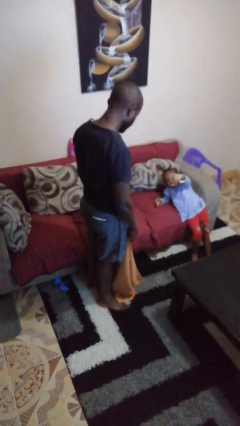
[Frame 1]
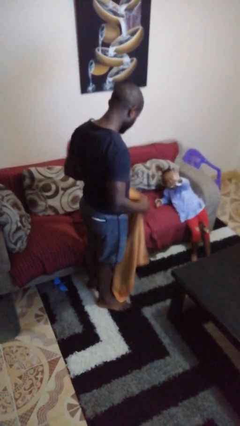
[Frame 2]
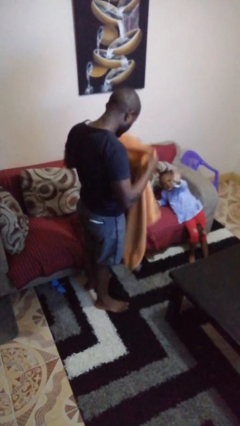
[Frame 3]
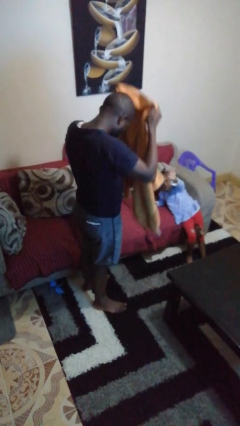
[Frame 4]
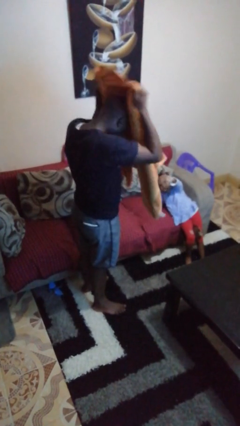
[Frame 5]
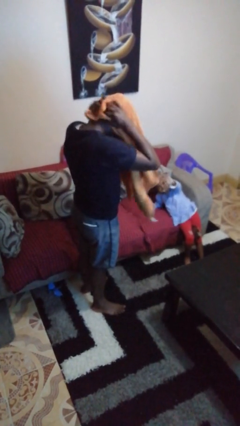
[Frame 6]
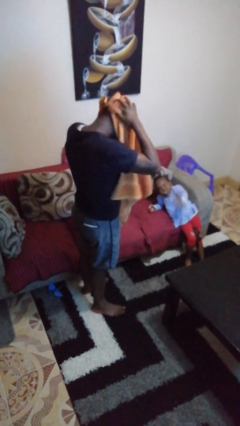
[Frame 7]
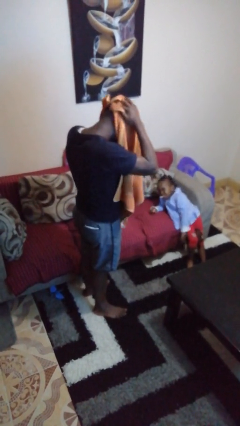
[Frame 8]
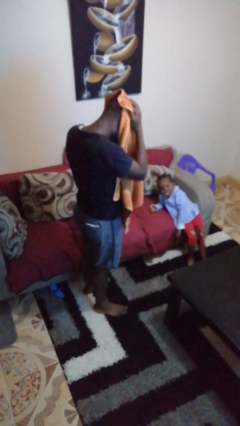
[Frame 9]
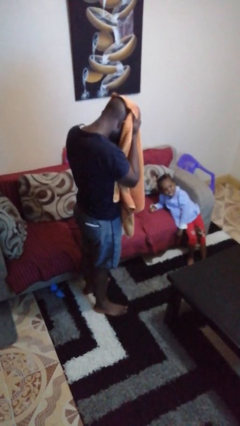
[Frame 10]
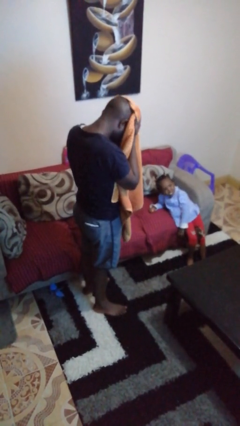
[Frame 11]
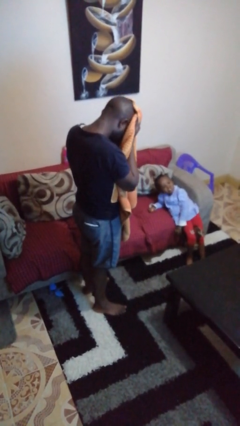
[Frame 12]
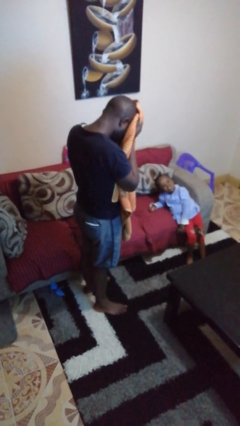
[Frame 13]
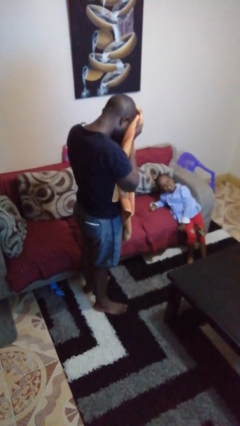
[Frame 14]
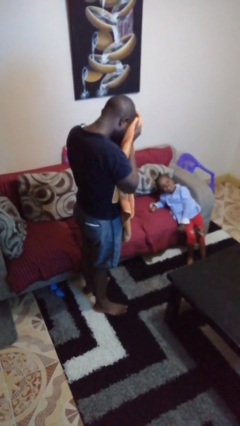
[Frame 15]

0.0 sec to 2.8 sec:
person dries hair with towel

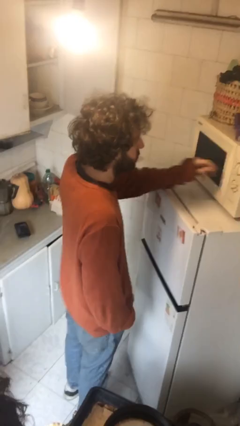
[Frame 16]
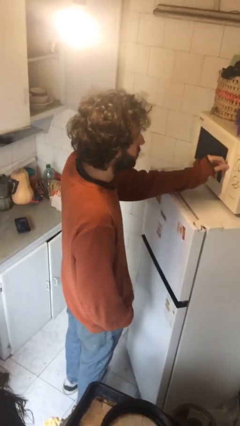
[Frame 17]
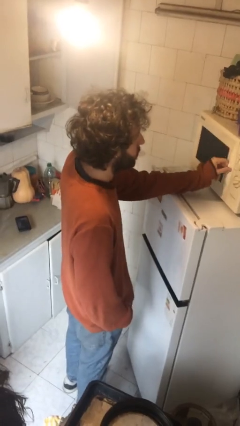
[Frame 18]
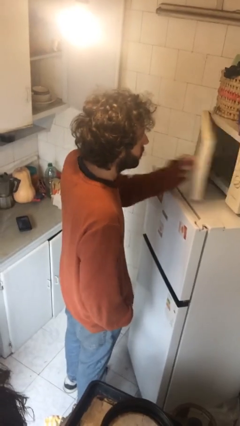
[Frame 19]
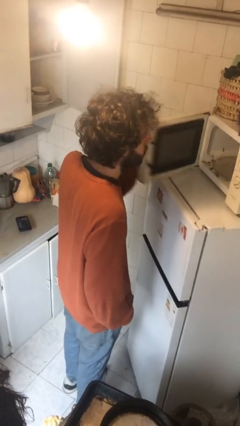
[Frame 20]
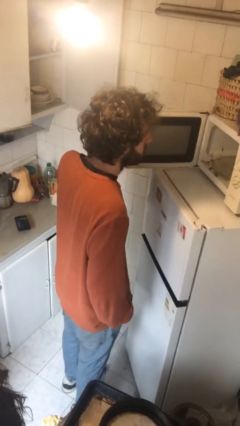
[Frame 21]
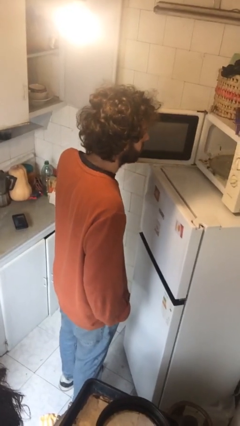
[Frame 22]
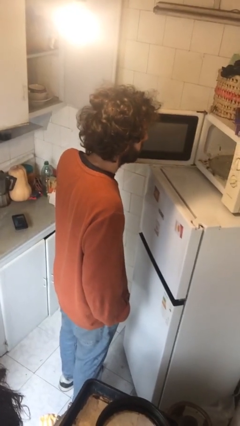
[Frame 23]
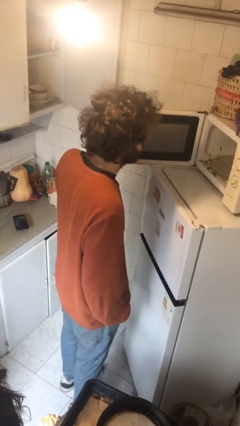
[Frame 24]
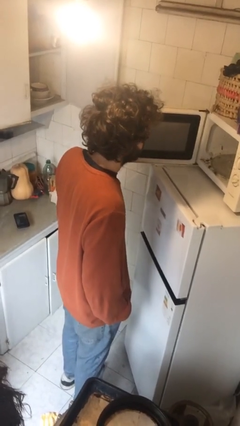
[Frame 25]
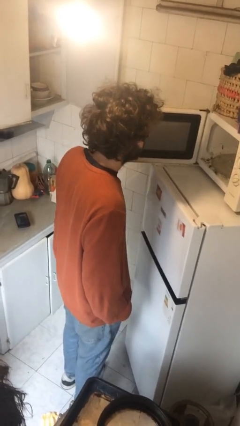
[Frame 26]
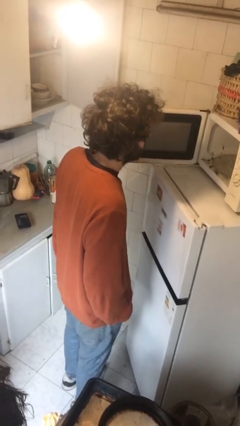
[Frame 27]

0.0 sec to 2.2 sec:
person opens microwave

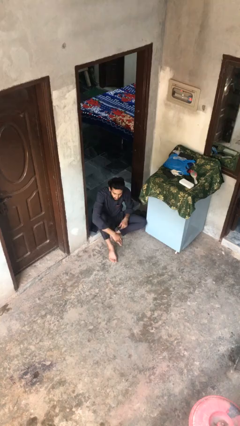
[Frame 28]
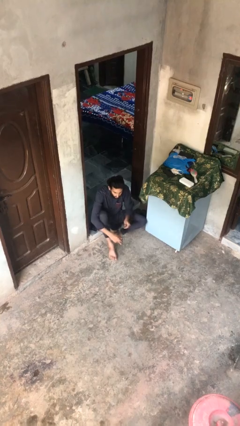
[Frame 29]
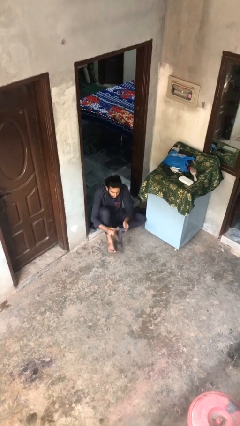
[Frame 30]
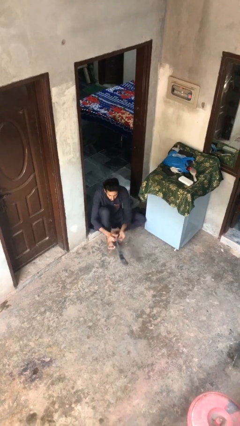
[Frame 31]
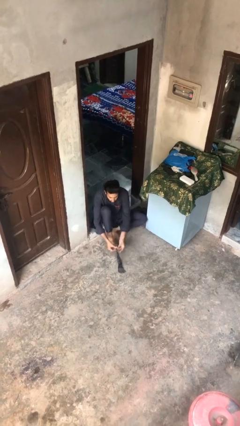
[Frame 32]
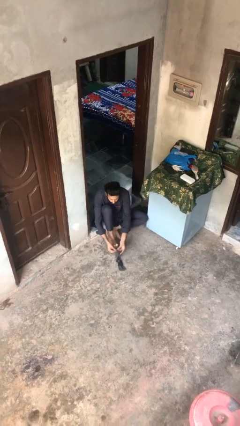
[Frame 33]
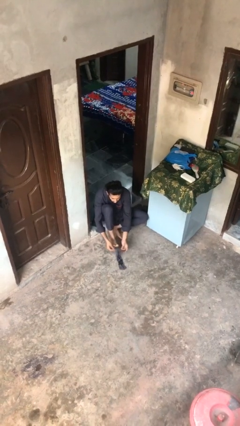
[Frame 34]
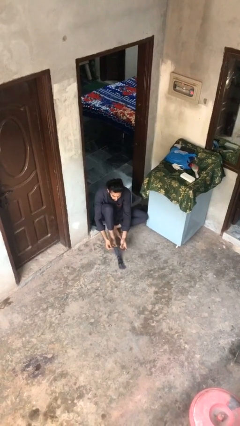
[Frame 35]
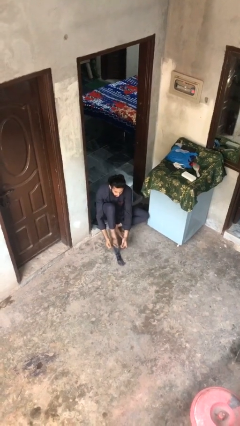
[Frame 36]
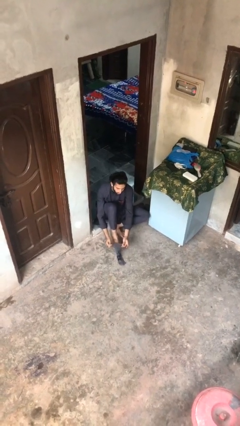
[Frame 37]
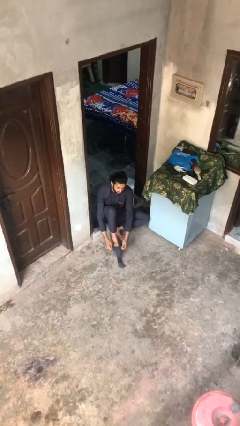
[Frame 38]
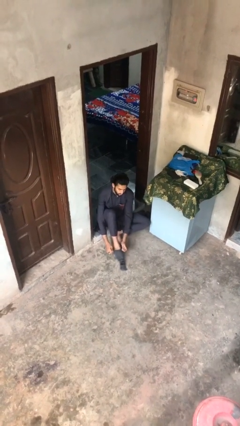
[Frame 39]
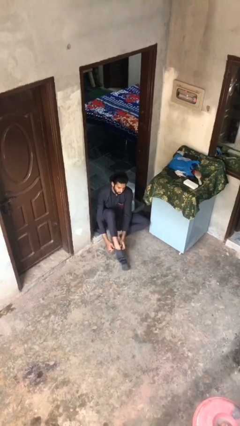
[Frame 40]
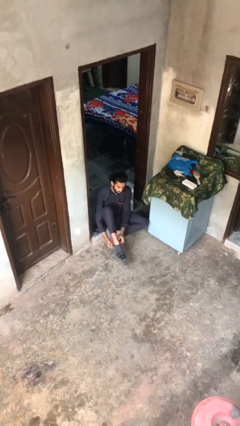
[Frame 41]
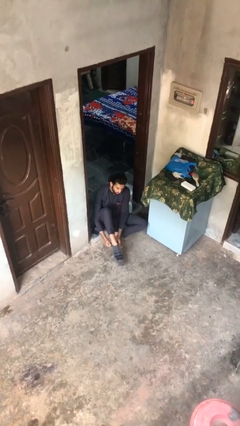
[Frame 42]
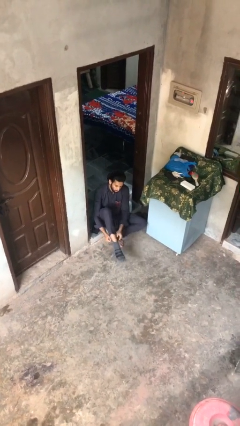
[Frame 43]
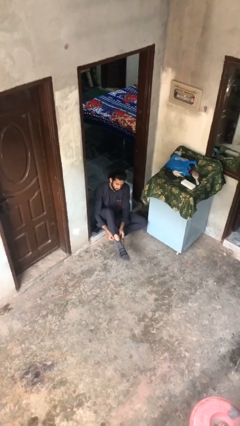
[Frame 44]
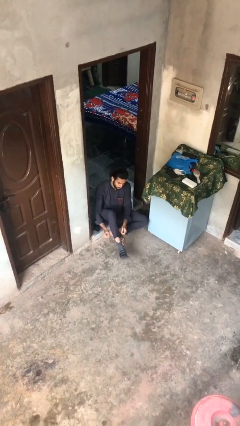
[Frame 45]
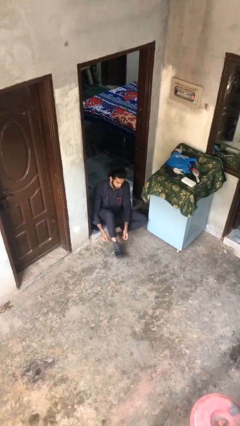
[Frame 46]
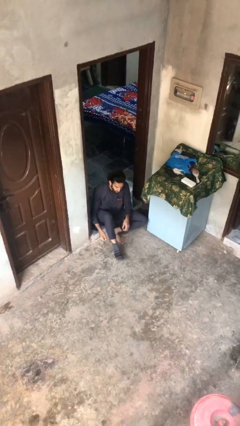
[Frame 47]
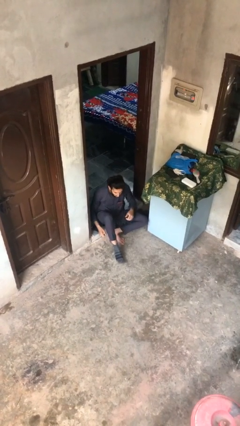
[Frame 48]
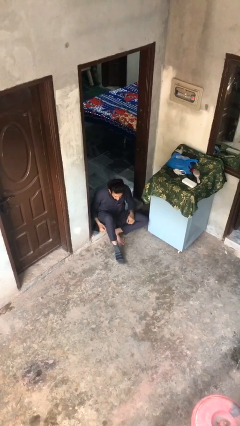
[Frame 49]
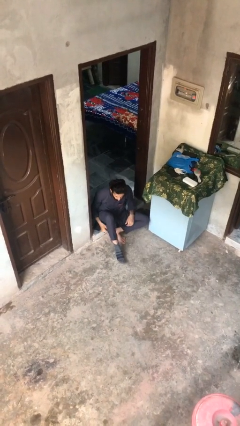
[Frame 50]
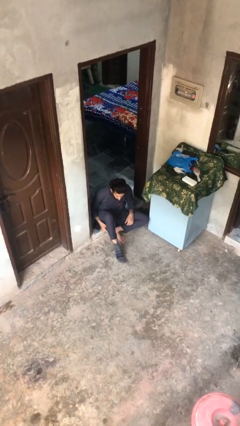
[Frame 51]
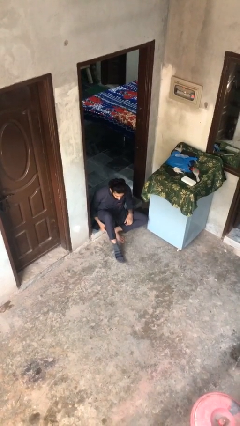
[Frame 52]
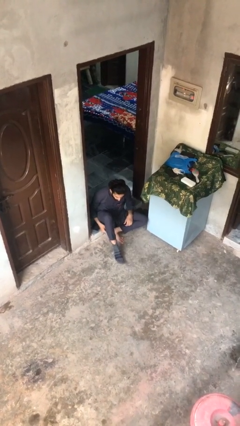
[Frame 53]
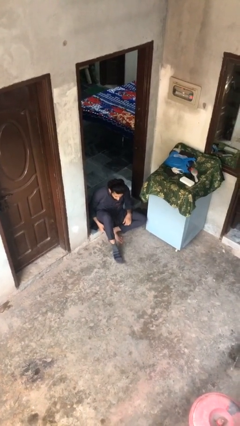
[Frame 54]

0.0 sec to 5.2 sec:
person puts on socks

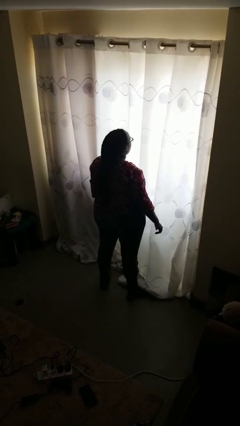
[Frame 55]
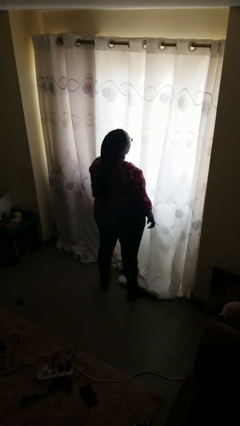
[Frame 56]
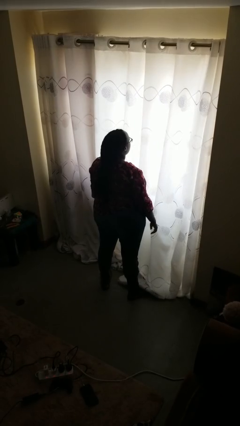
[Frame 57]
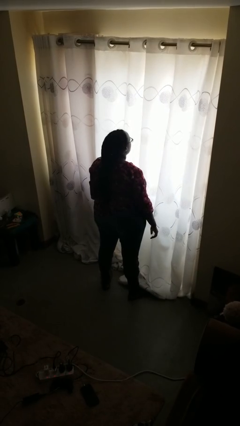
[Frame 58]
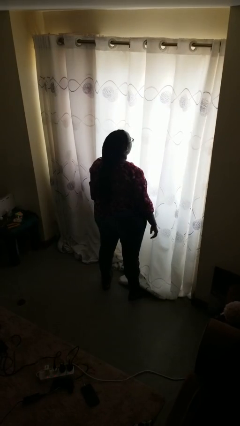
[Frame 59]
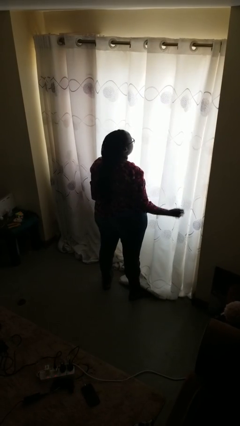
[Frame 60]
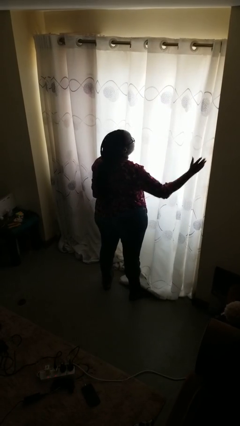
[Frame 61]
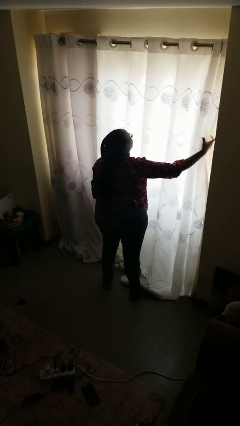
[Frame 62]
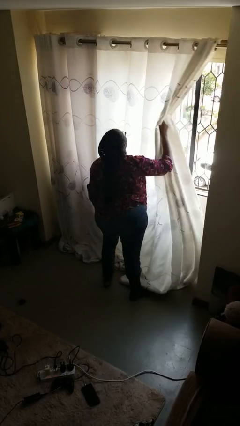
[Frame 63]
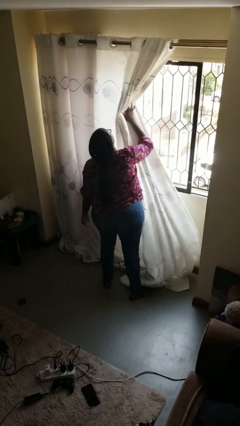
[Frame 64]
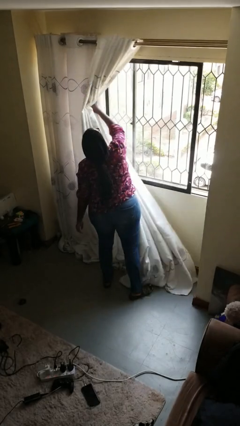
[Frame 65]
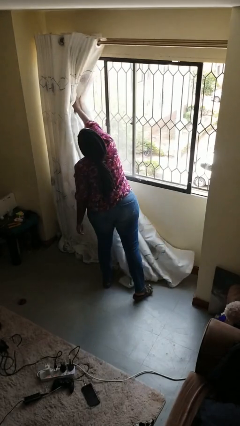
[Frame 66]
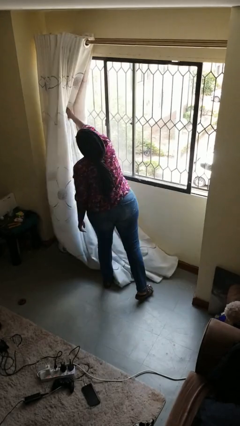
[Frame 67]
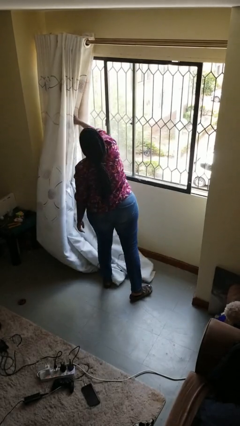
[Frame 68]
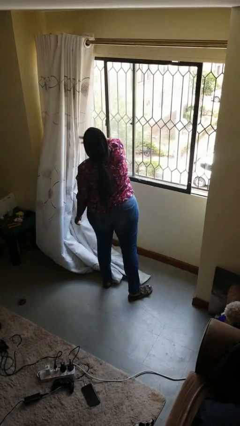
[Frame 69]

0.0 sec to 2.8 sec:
person opens curtains

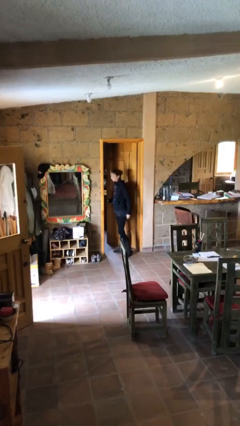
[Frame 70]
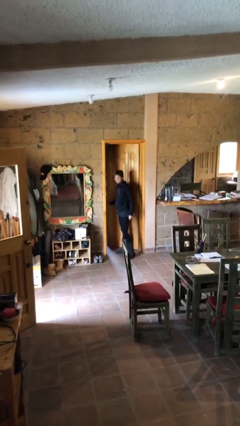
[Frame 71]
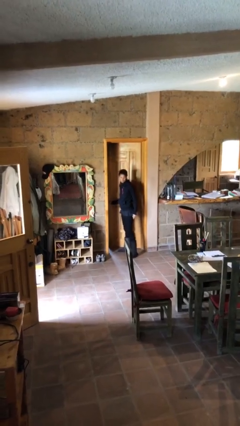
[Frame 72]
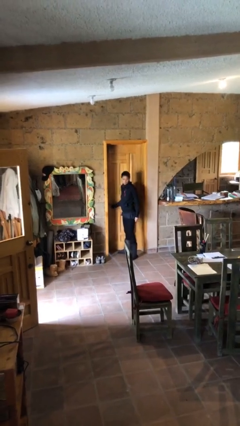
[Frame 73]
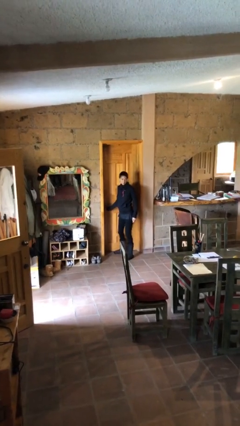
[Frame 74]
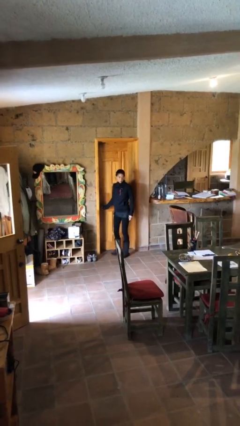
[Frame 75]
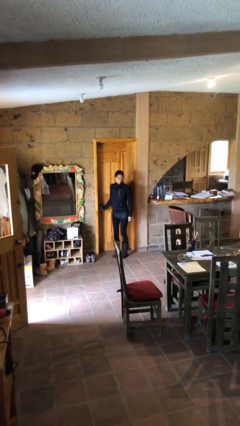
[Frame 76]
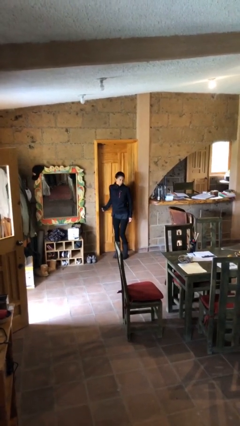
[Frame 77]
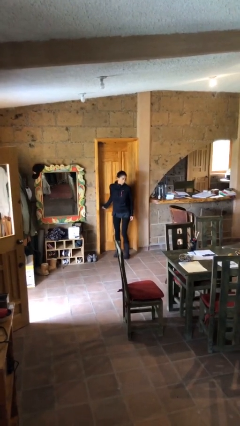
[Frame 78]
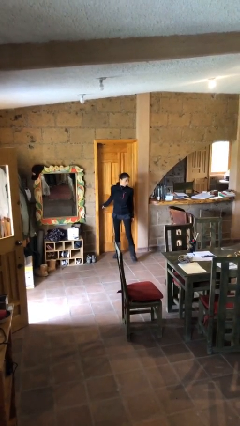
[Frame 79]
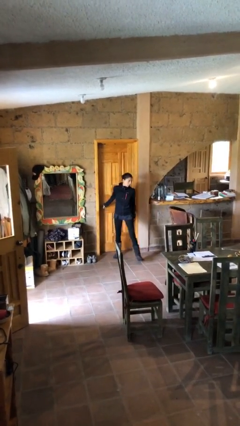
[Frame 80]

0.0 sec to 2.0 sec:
person closes facility door

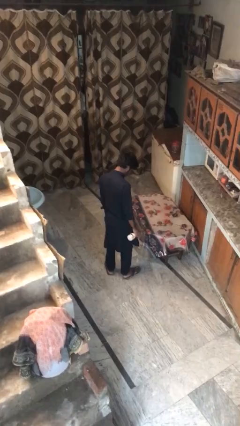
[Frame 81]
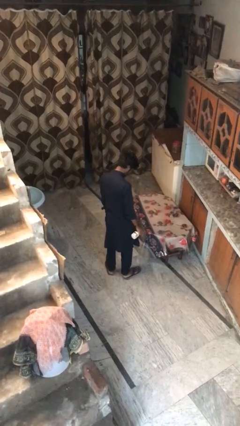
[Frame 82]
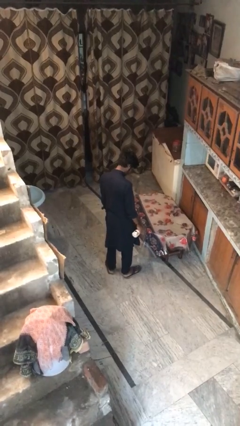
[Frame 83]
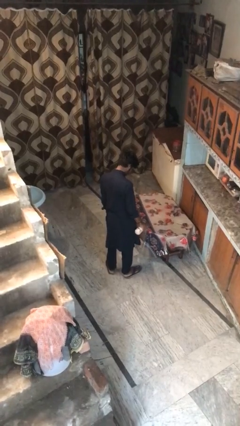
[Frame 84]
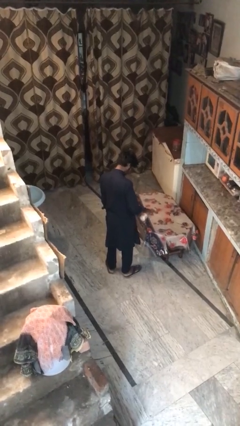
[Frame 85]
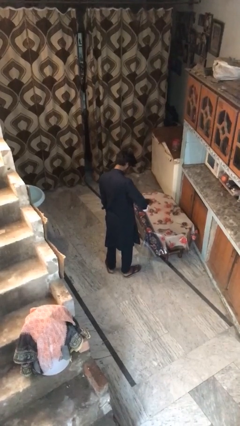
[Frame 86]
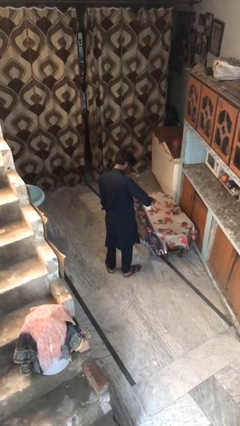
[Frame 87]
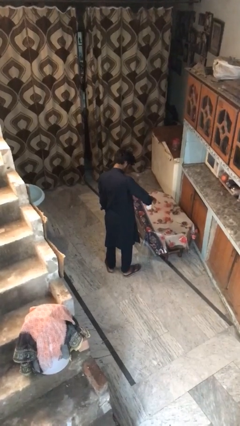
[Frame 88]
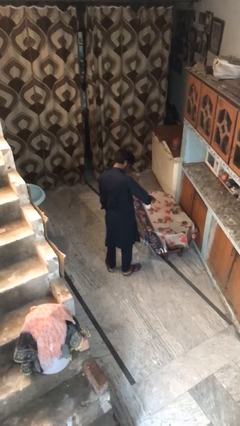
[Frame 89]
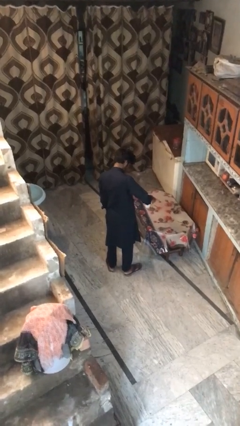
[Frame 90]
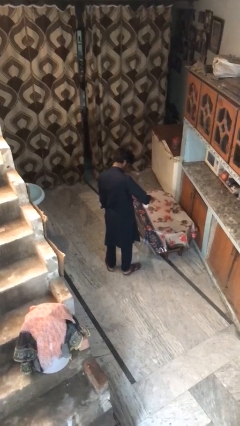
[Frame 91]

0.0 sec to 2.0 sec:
person sprays from bottle

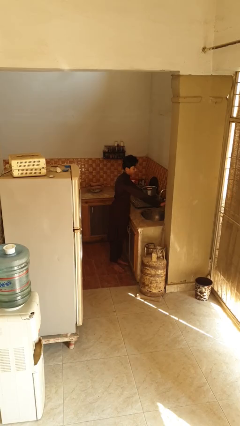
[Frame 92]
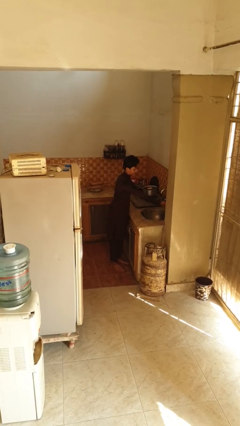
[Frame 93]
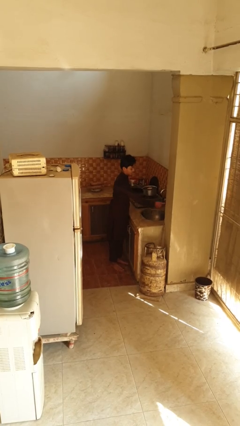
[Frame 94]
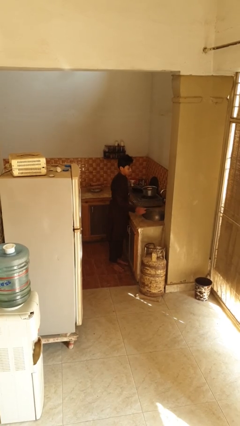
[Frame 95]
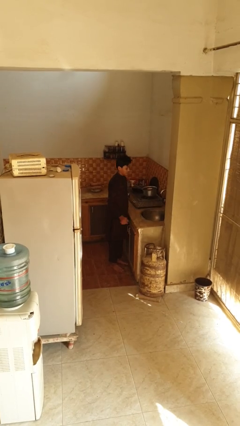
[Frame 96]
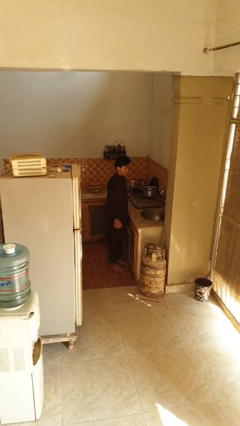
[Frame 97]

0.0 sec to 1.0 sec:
person turns off faucet
